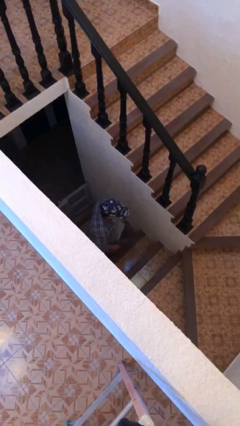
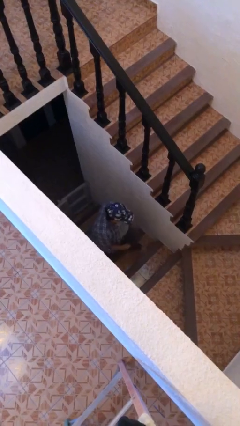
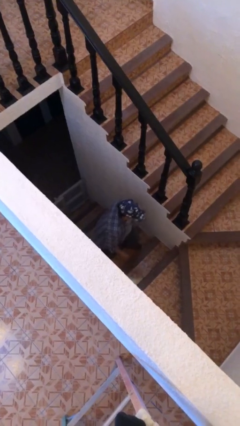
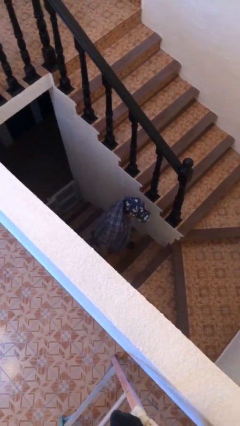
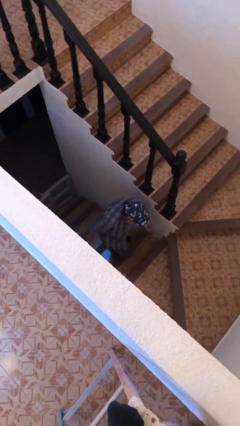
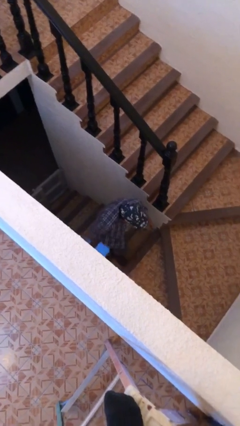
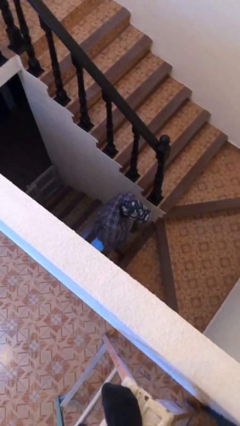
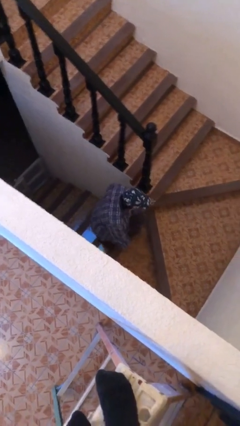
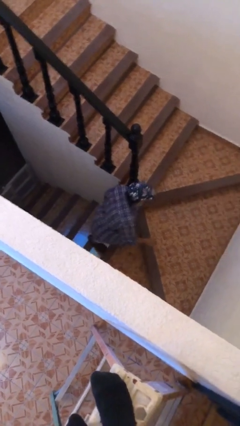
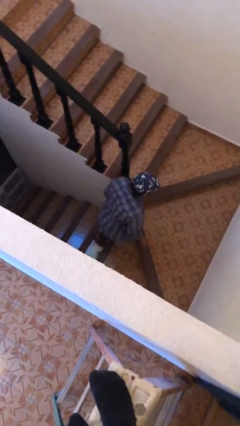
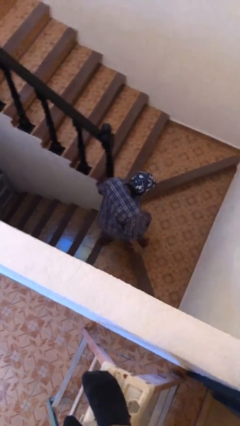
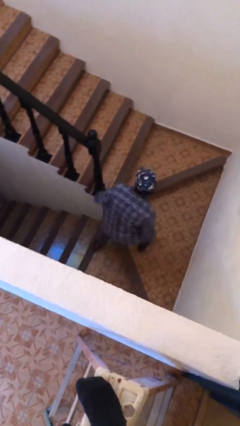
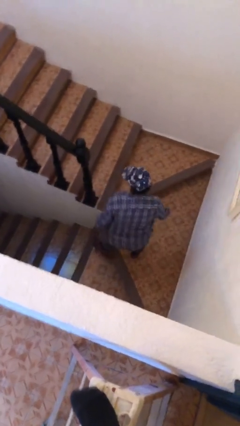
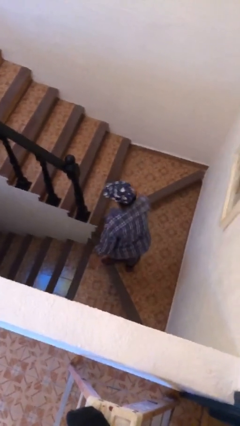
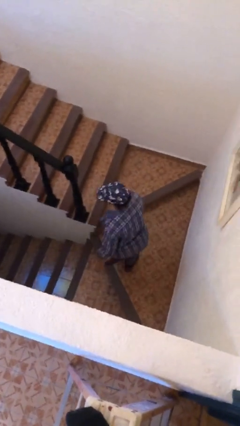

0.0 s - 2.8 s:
person climbs up stairs

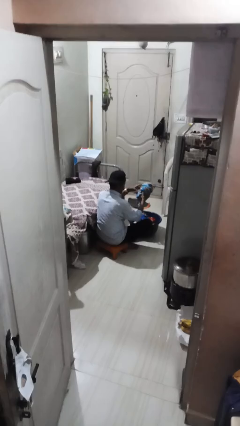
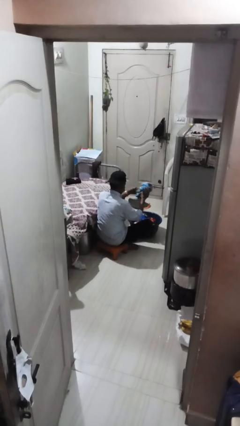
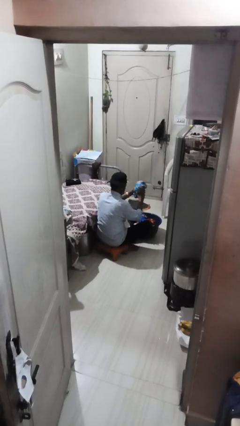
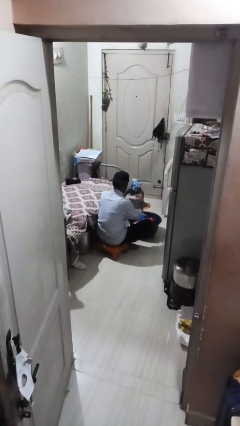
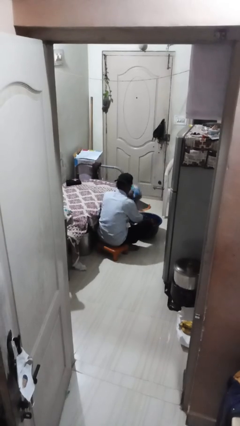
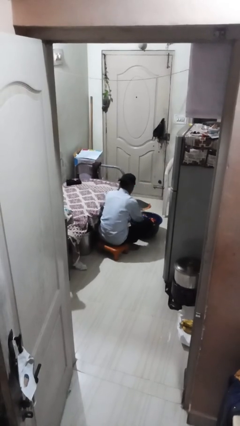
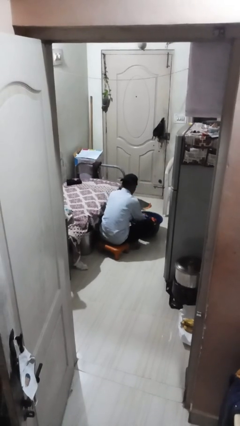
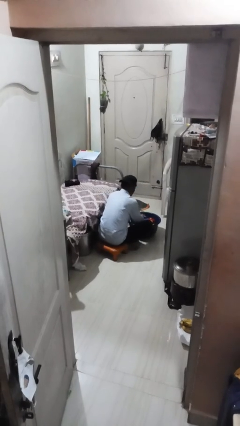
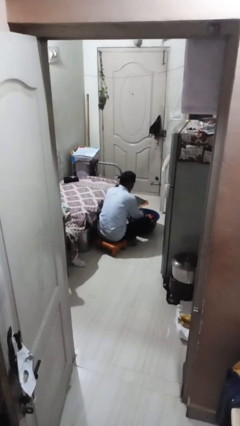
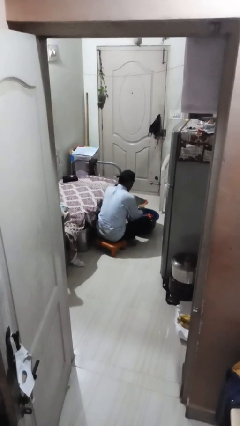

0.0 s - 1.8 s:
person puts object into basket

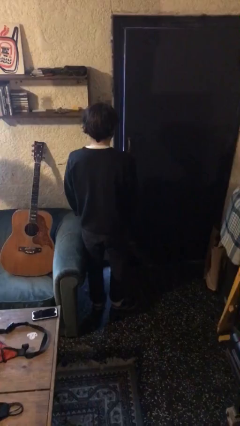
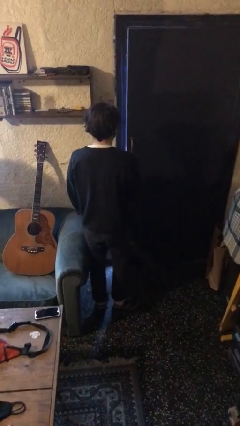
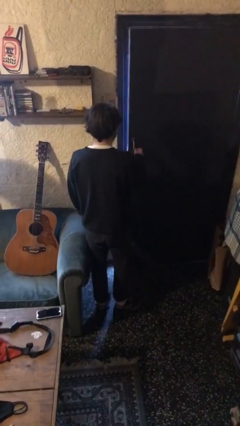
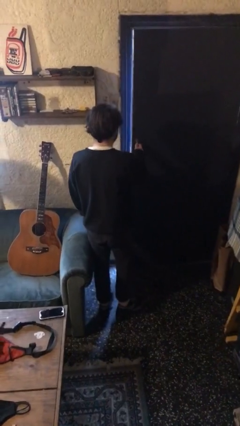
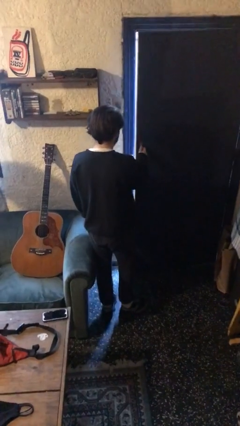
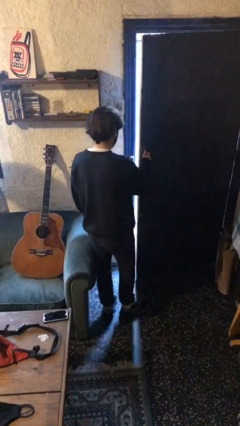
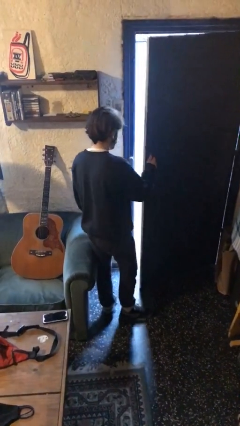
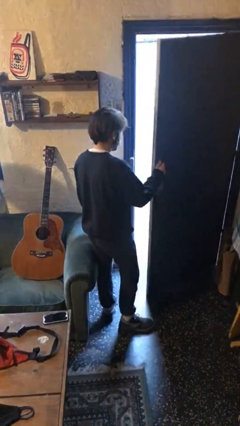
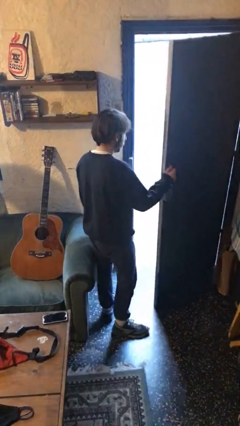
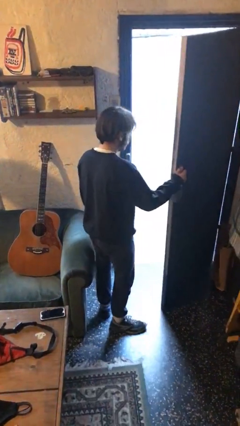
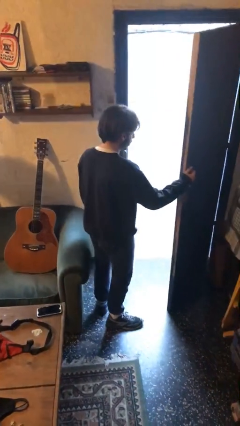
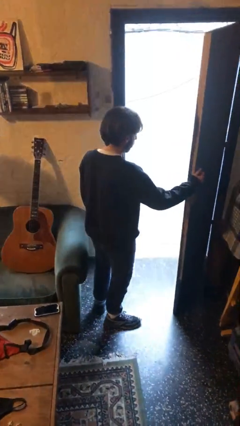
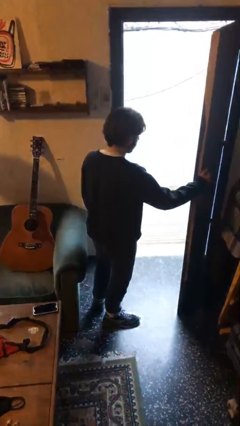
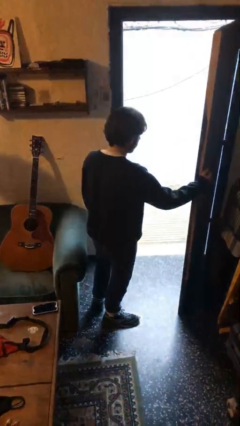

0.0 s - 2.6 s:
person opens facility door

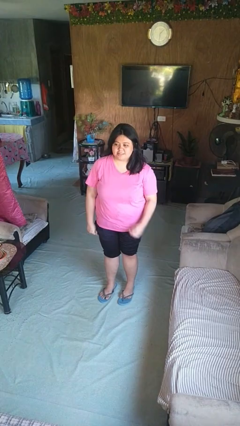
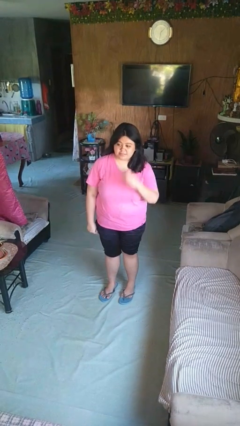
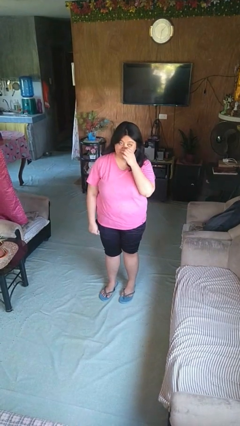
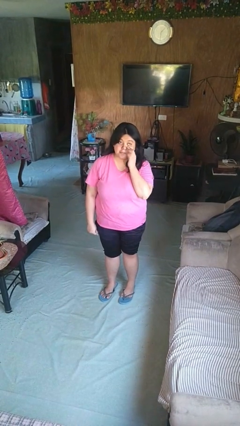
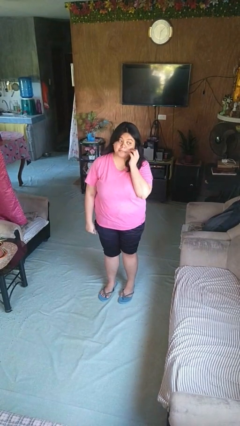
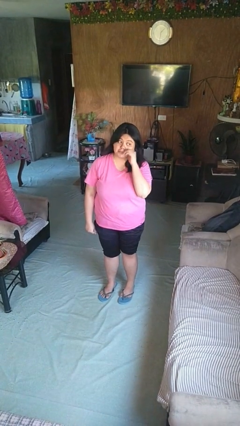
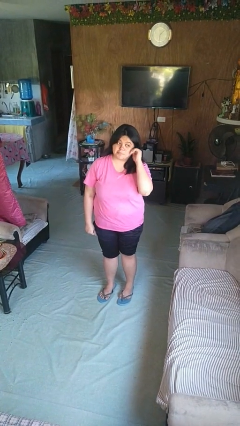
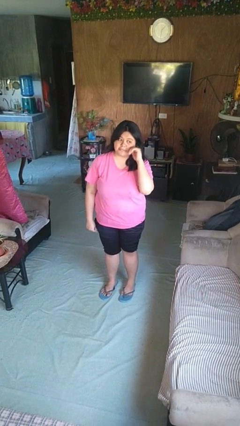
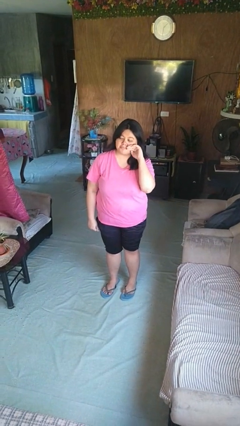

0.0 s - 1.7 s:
person scratches face

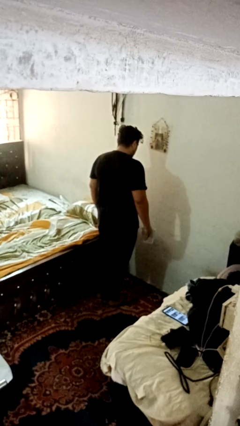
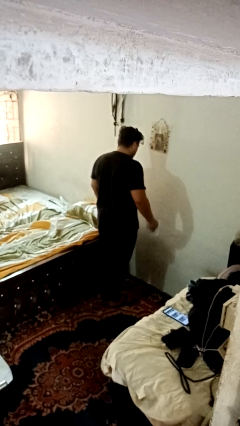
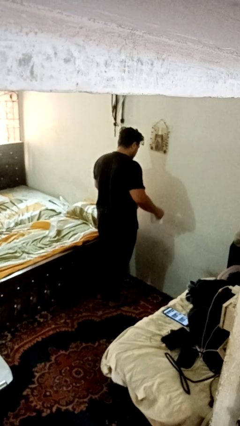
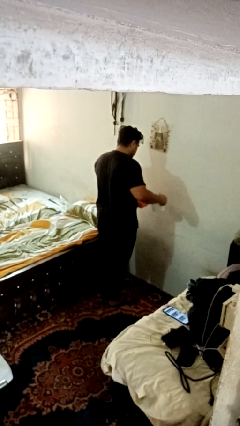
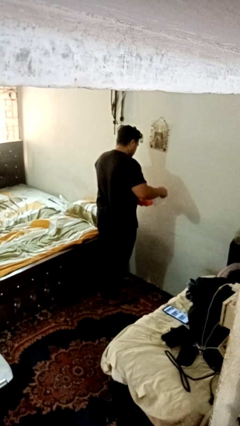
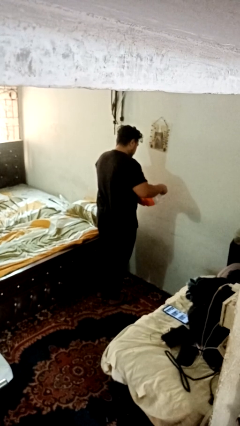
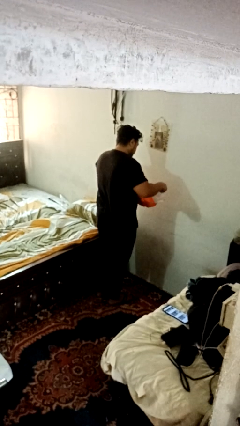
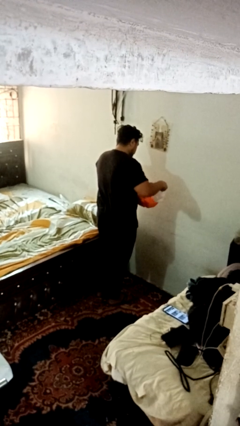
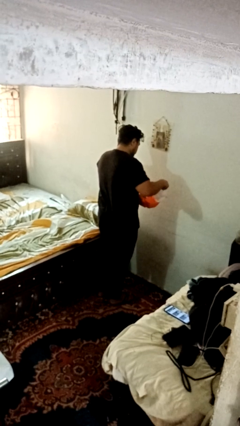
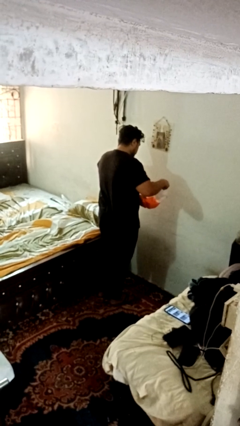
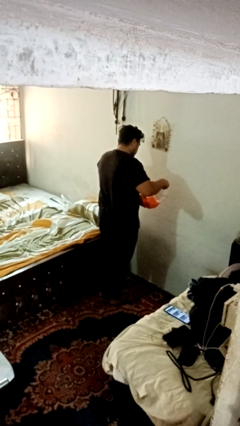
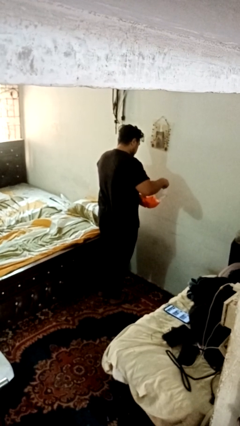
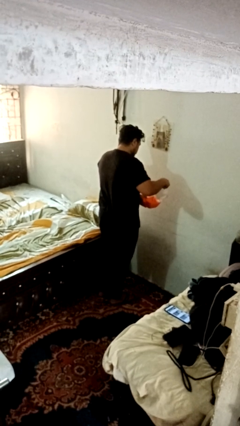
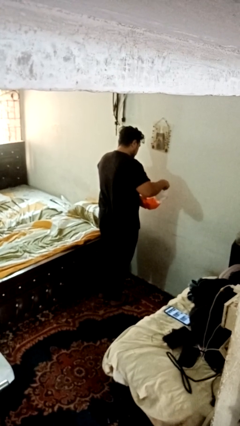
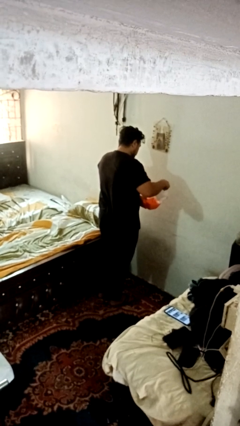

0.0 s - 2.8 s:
person pours into bowl

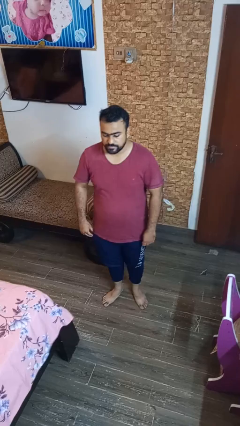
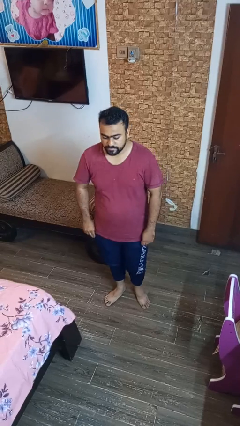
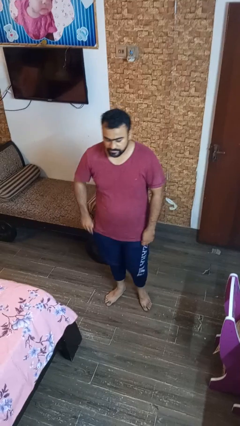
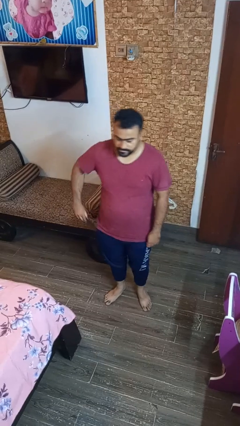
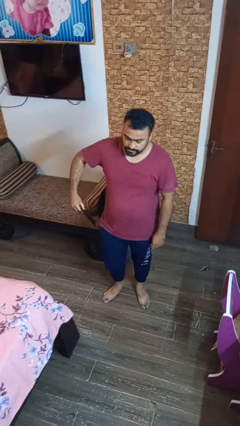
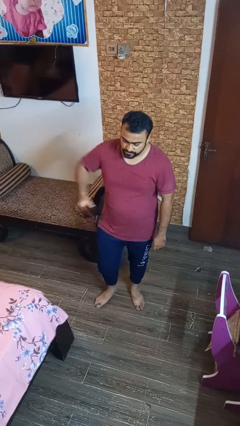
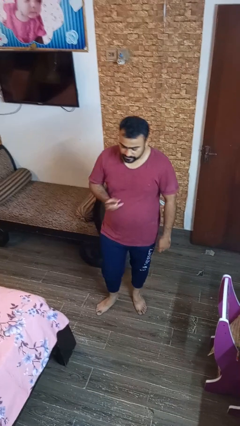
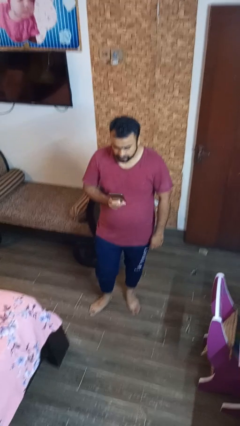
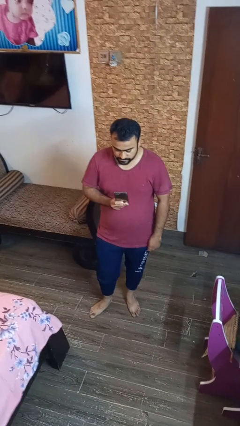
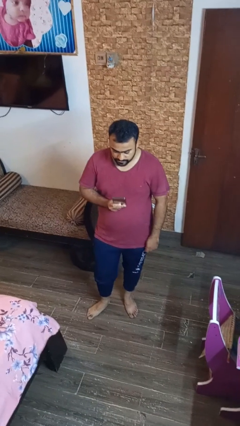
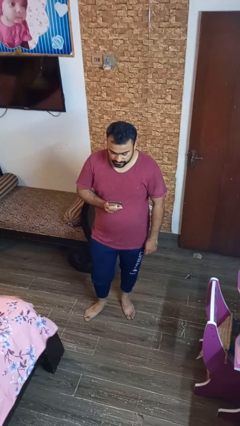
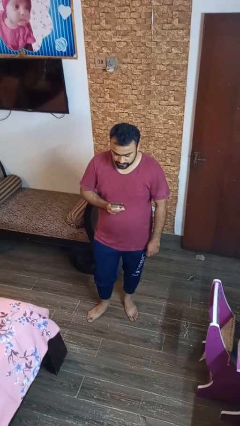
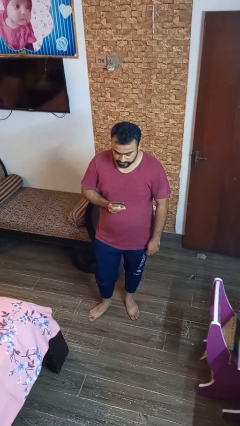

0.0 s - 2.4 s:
person takes phone from pocket

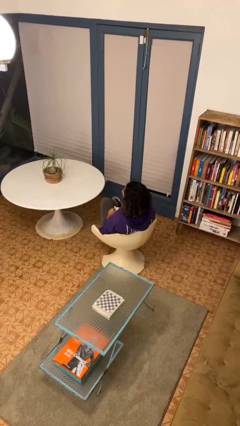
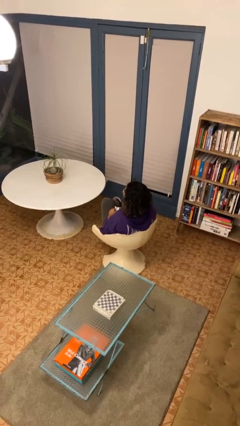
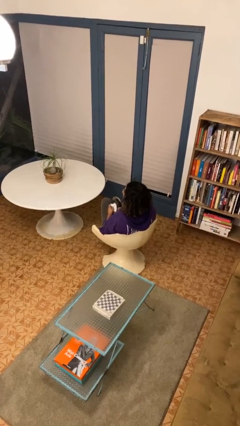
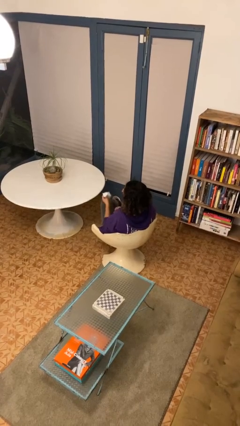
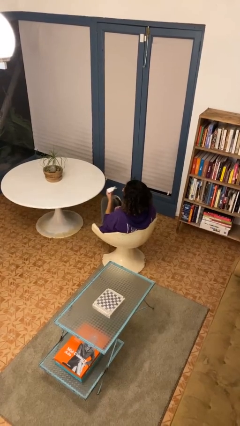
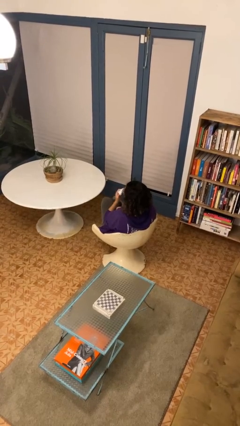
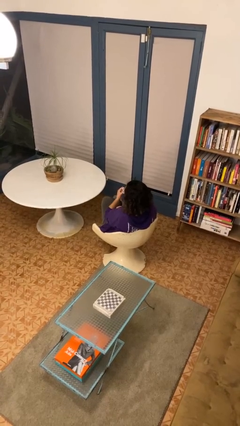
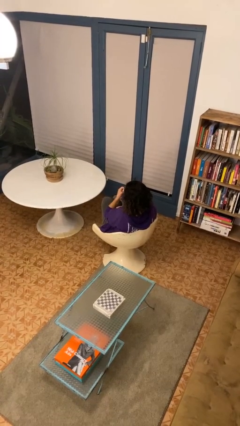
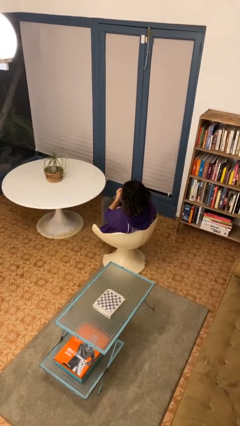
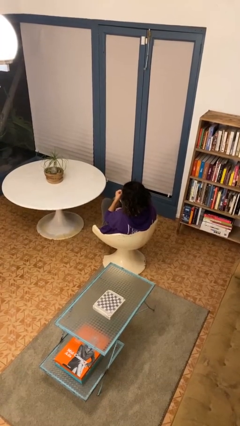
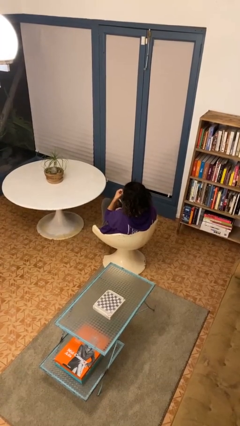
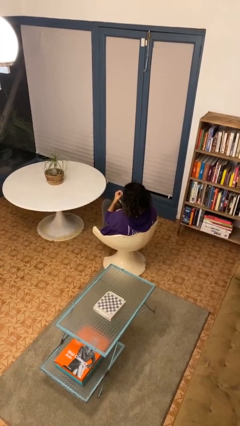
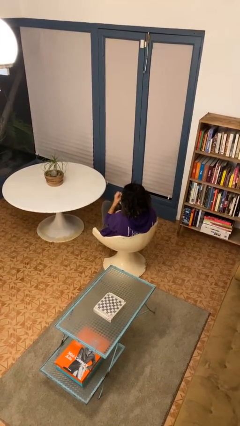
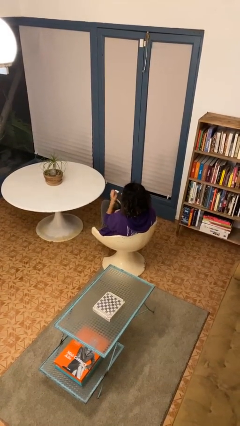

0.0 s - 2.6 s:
person blows nose

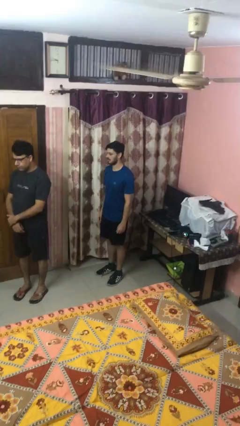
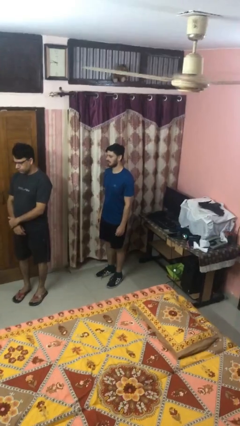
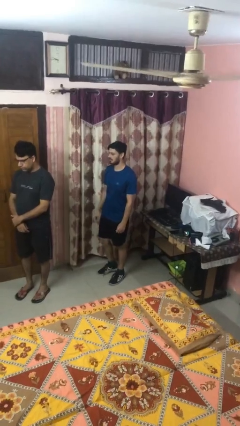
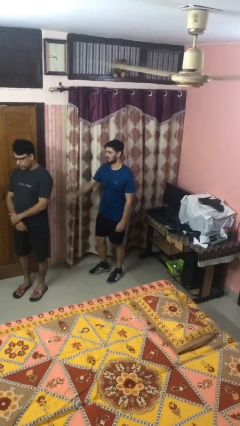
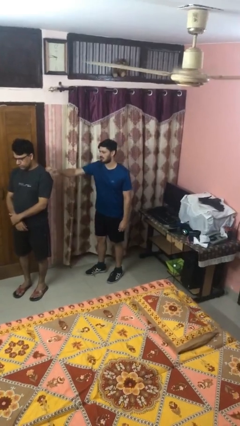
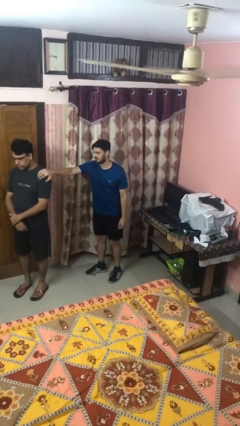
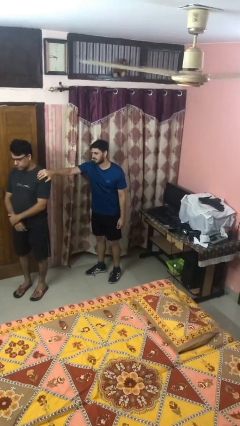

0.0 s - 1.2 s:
person grabs person by shoulder
